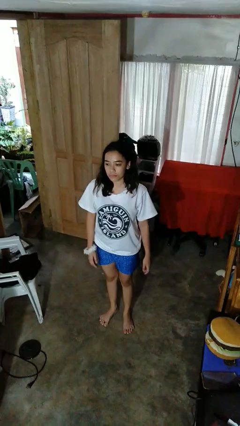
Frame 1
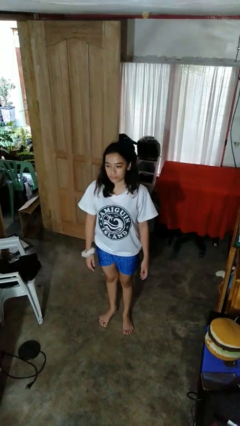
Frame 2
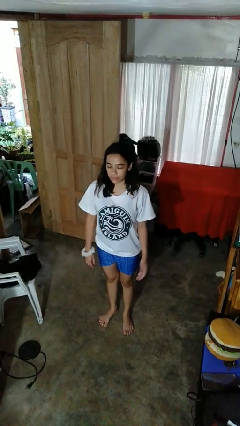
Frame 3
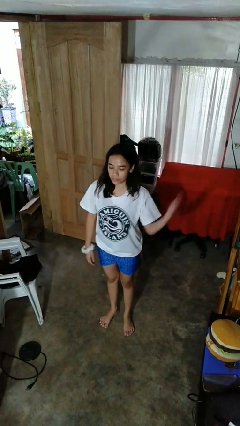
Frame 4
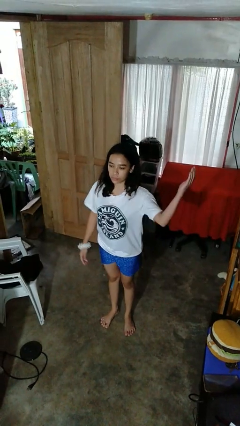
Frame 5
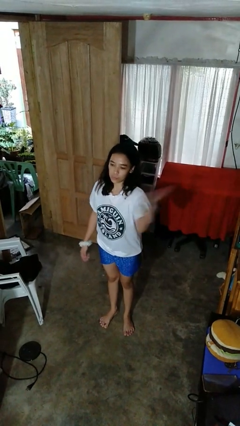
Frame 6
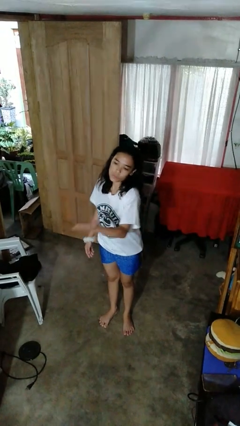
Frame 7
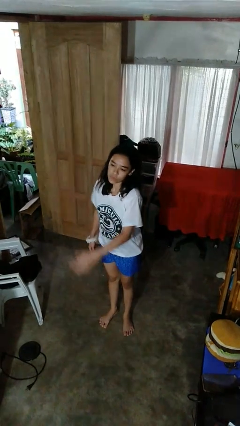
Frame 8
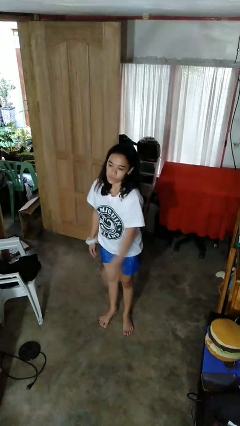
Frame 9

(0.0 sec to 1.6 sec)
person karate chop

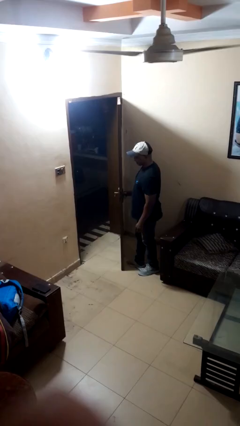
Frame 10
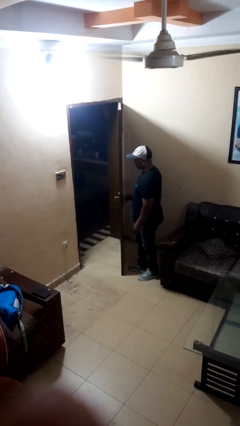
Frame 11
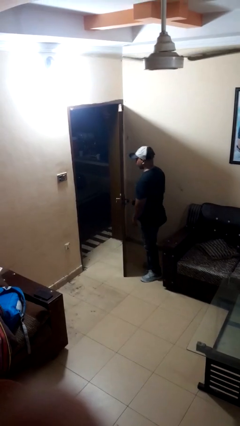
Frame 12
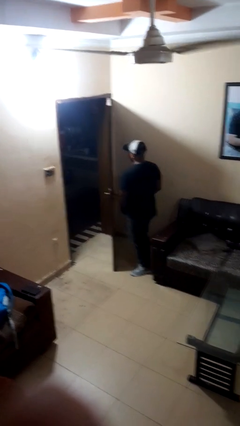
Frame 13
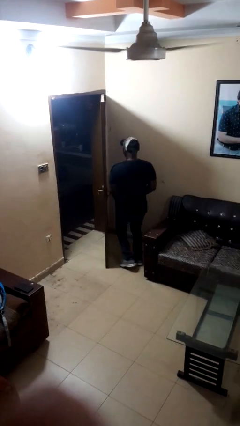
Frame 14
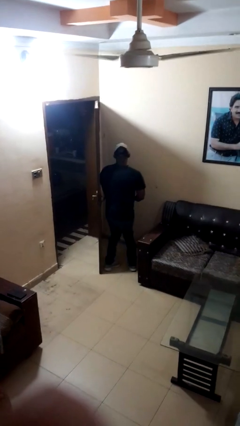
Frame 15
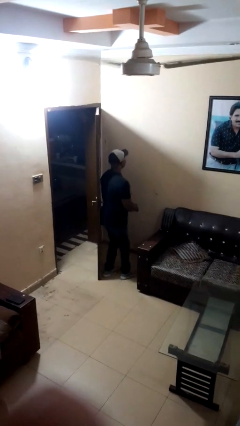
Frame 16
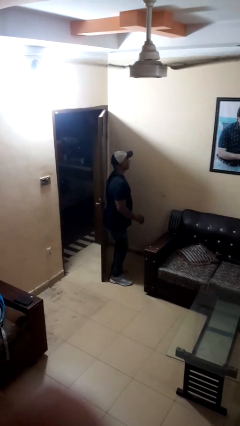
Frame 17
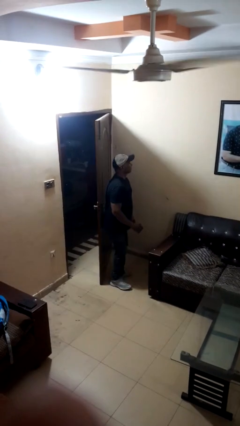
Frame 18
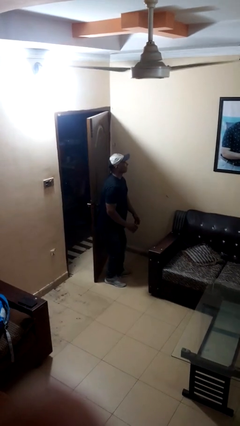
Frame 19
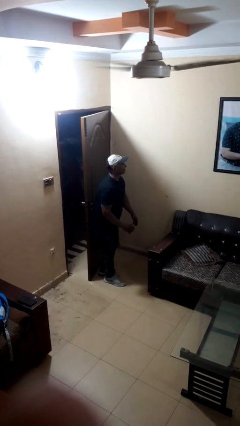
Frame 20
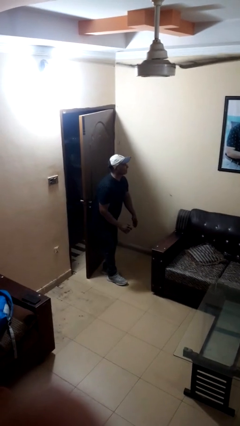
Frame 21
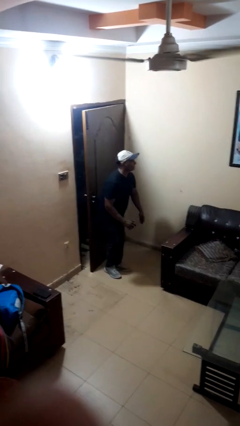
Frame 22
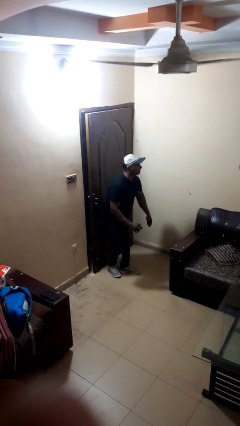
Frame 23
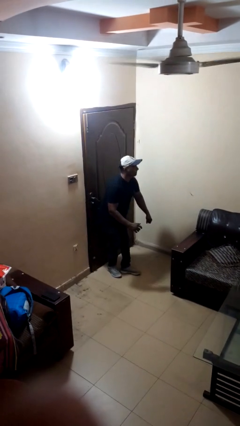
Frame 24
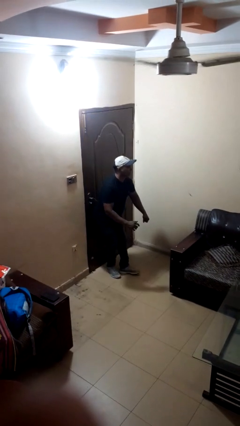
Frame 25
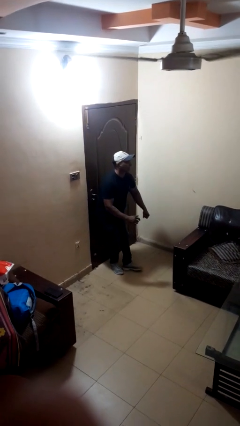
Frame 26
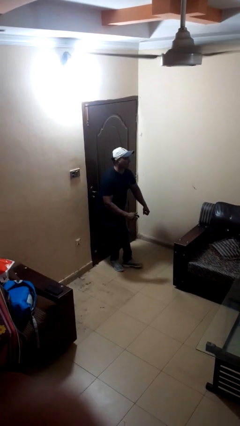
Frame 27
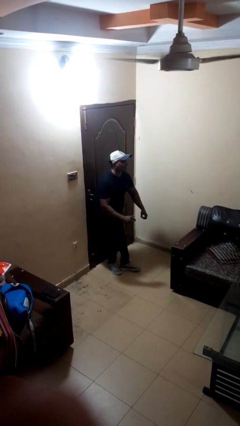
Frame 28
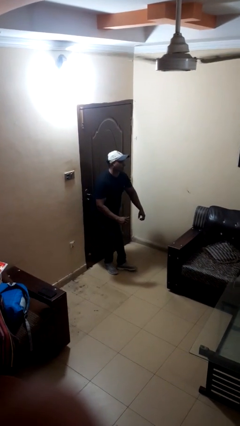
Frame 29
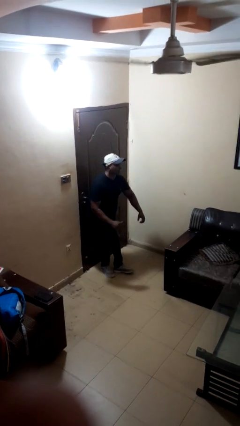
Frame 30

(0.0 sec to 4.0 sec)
person closes door with hip

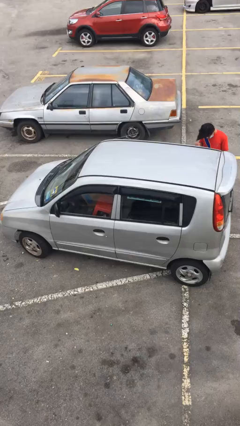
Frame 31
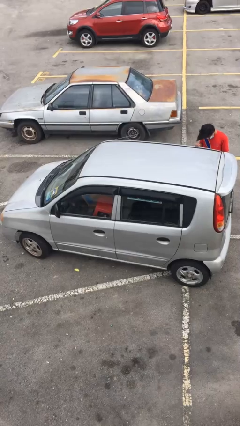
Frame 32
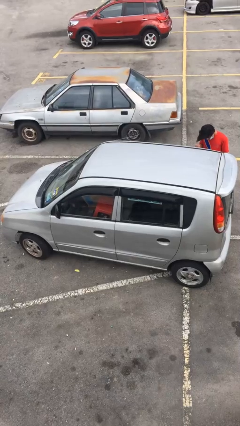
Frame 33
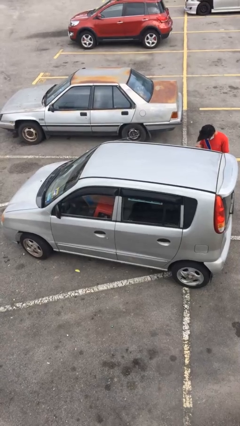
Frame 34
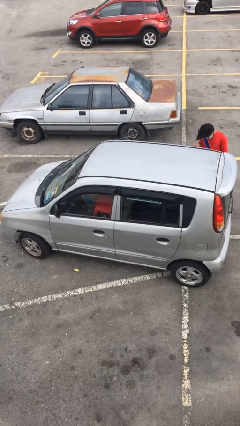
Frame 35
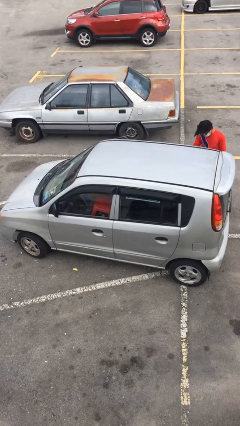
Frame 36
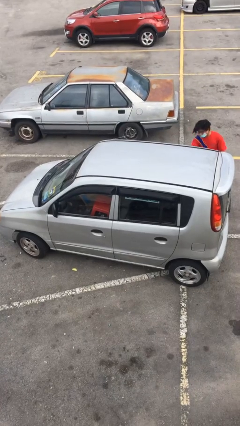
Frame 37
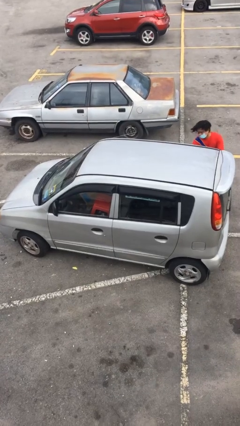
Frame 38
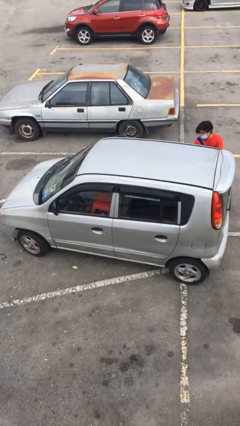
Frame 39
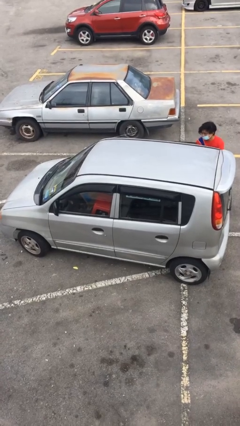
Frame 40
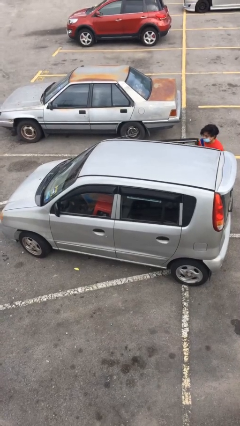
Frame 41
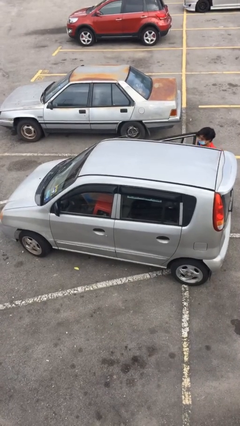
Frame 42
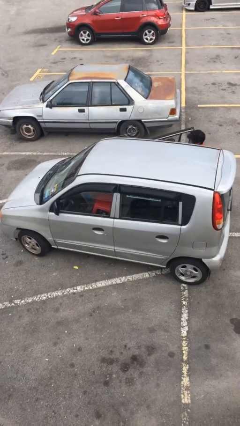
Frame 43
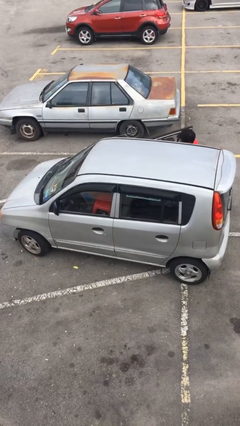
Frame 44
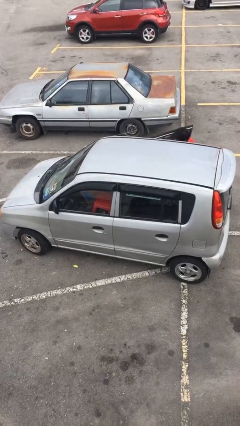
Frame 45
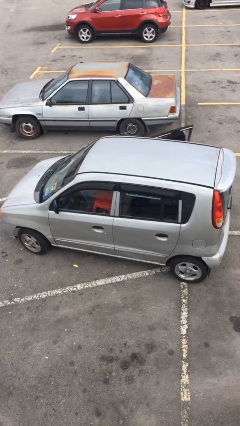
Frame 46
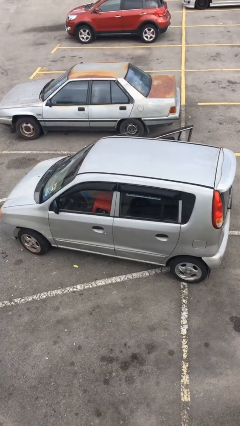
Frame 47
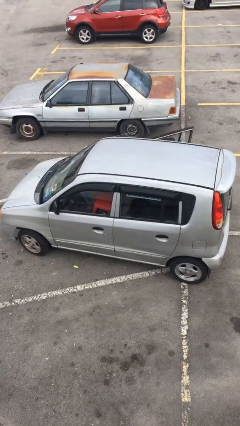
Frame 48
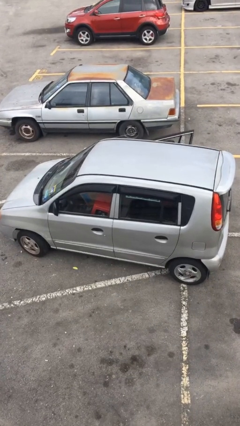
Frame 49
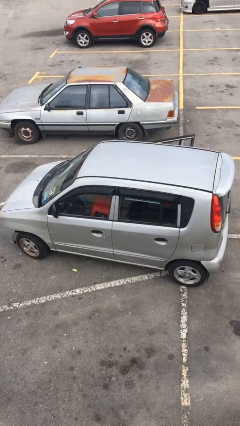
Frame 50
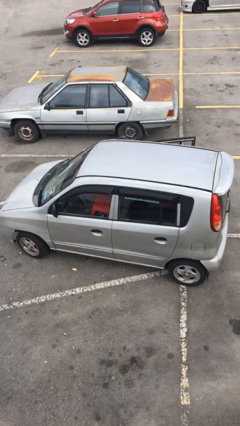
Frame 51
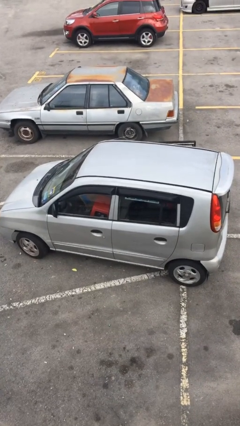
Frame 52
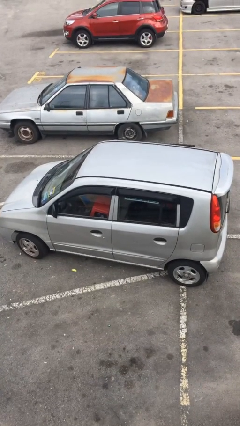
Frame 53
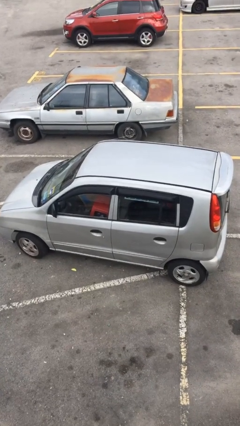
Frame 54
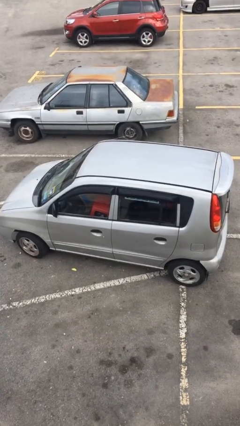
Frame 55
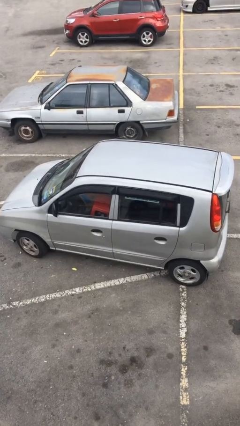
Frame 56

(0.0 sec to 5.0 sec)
car picks up person

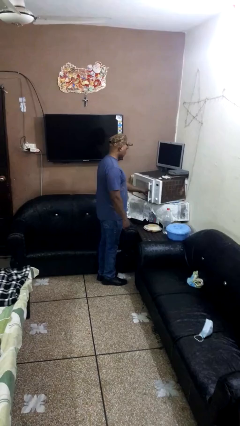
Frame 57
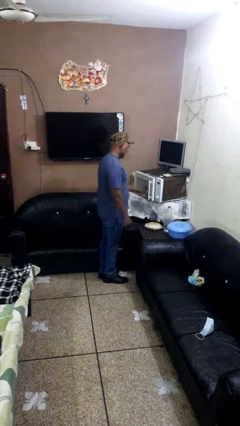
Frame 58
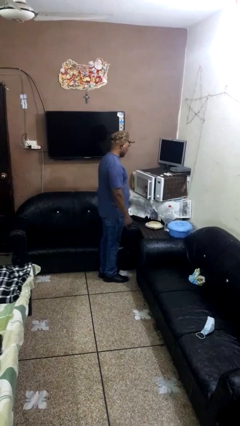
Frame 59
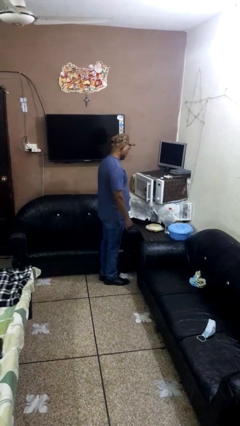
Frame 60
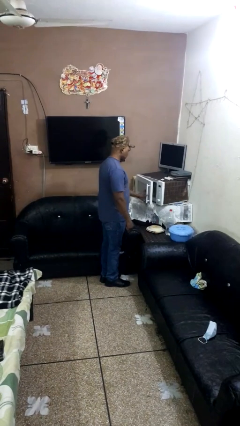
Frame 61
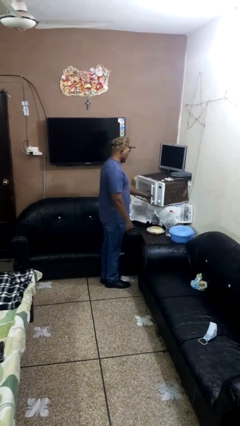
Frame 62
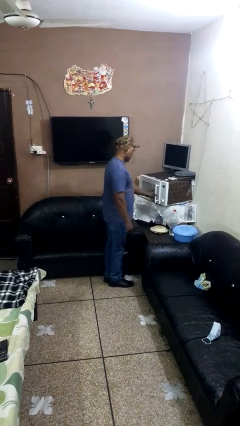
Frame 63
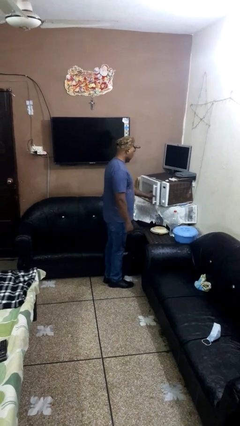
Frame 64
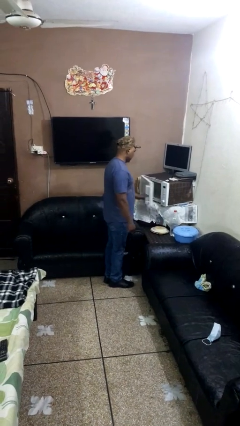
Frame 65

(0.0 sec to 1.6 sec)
person closes oven door

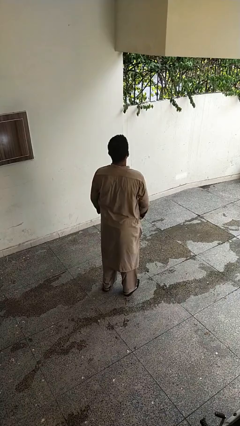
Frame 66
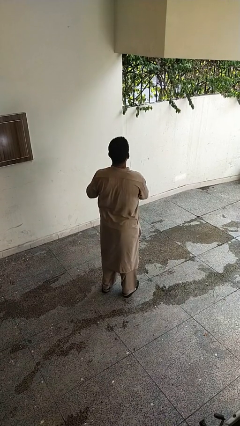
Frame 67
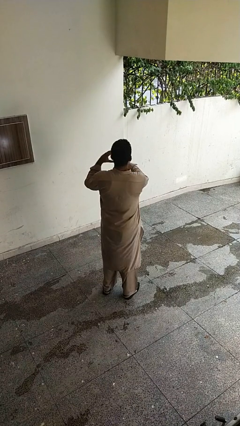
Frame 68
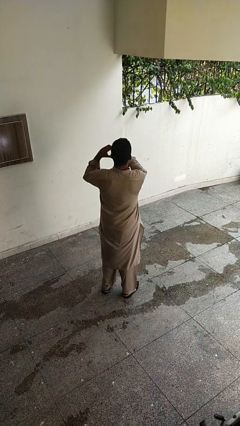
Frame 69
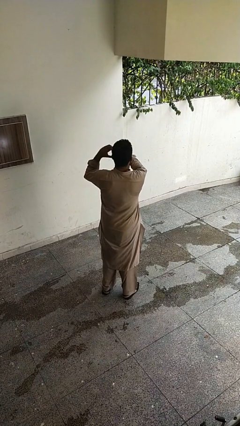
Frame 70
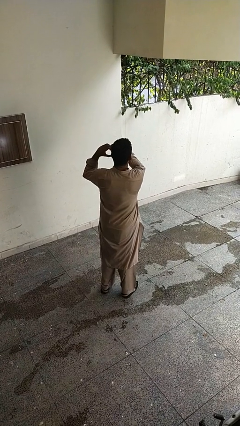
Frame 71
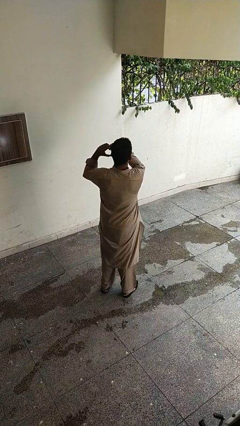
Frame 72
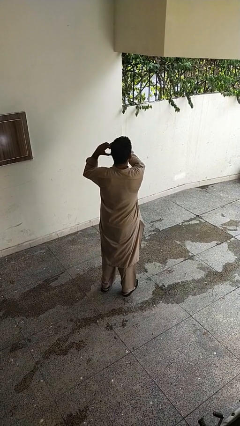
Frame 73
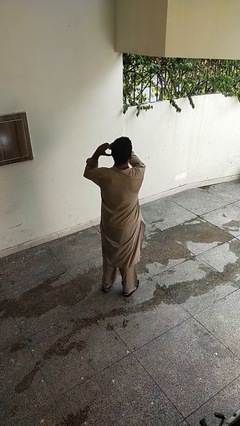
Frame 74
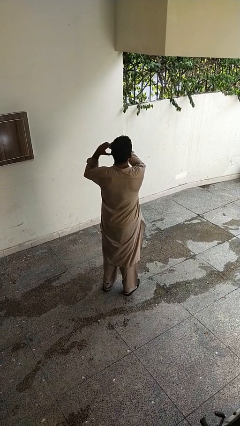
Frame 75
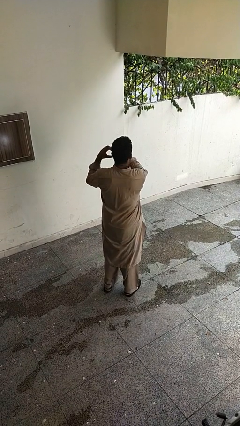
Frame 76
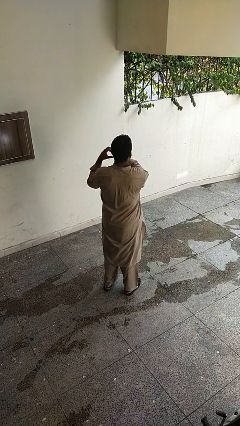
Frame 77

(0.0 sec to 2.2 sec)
person gestures heart

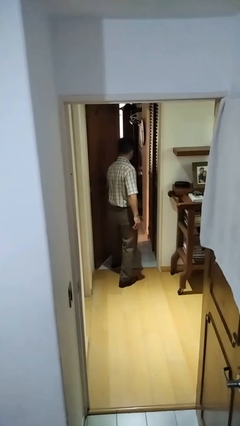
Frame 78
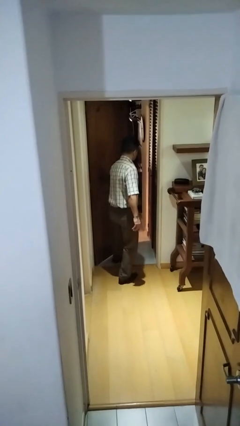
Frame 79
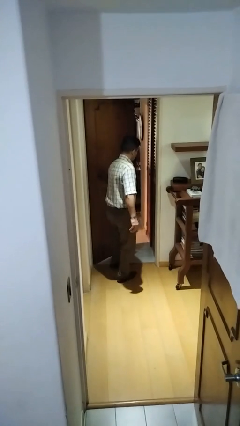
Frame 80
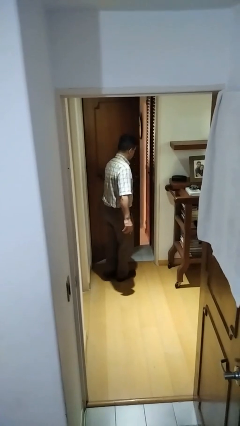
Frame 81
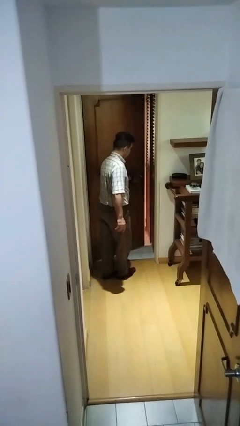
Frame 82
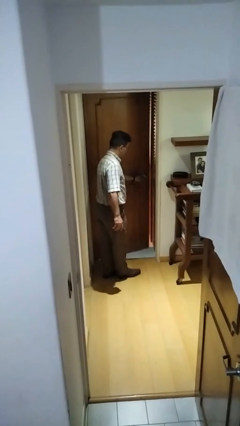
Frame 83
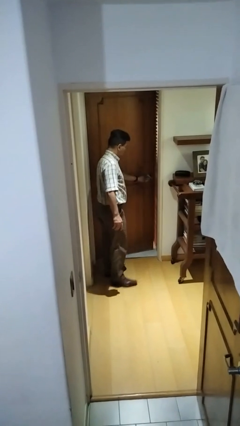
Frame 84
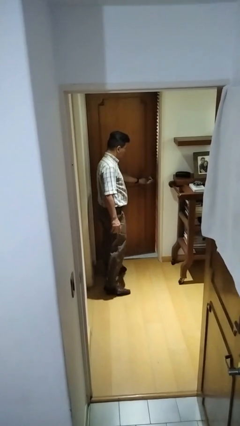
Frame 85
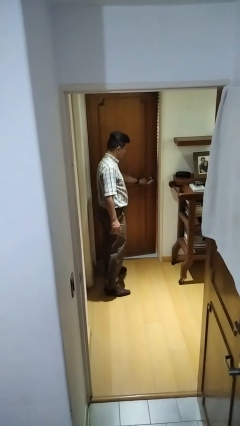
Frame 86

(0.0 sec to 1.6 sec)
person closes facility door

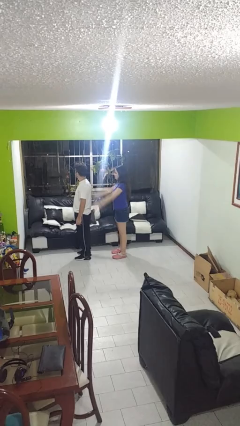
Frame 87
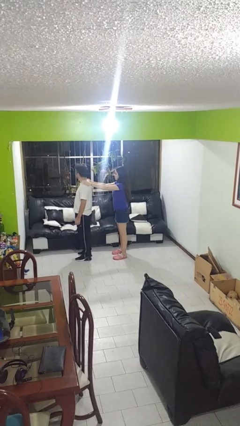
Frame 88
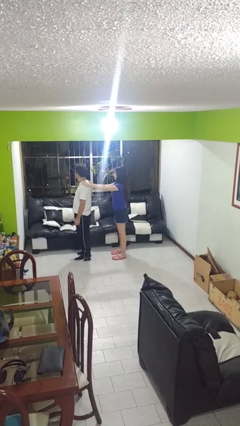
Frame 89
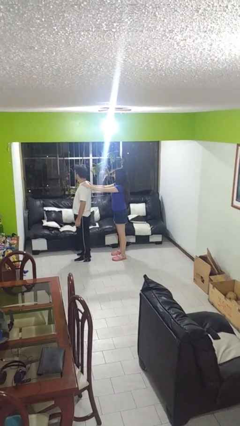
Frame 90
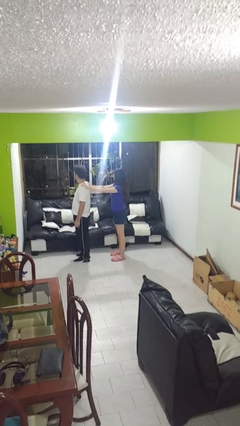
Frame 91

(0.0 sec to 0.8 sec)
person grabs person by shoulder

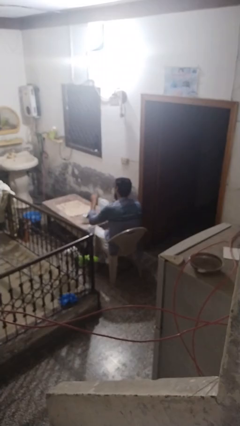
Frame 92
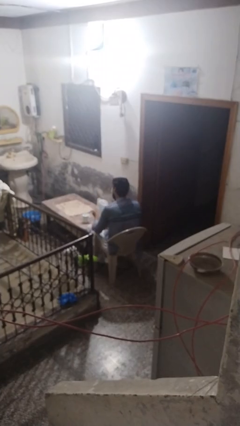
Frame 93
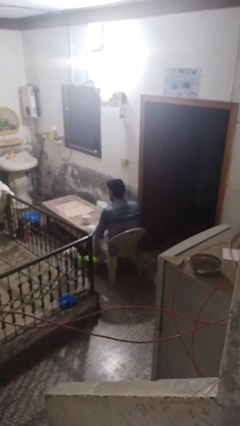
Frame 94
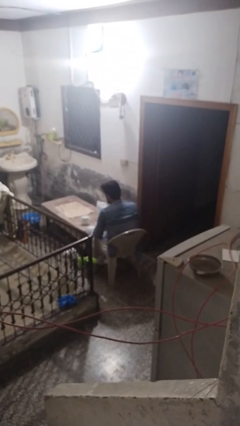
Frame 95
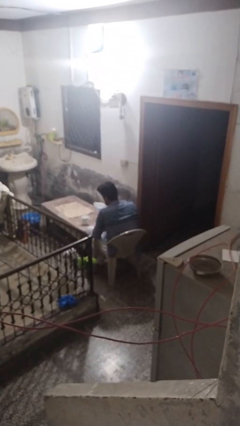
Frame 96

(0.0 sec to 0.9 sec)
person pours liquid into cup
